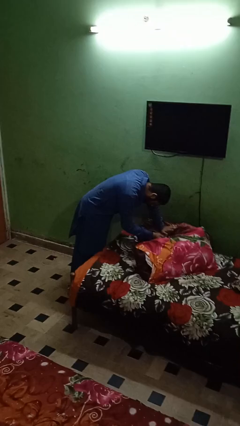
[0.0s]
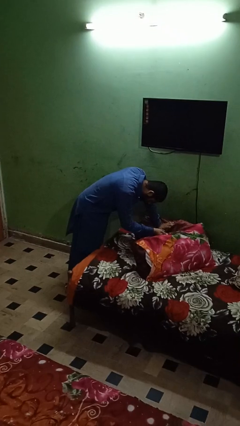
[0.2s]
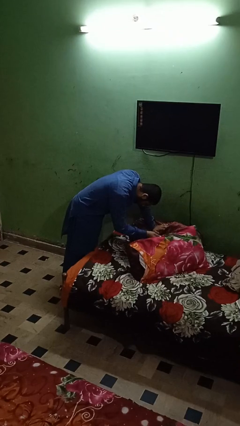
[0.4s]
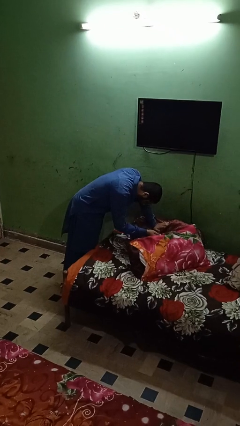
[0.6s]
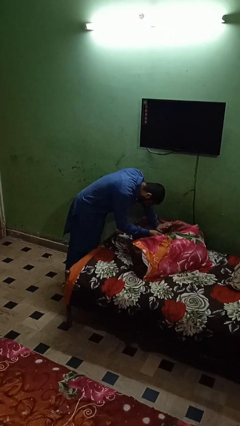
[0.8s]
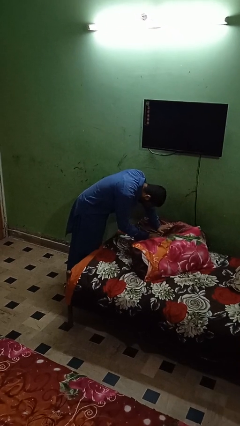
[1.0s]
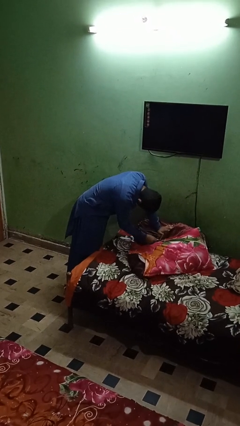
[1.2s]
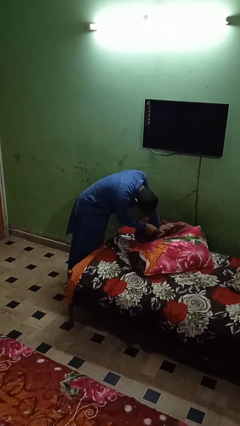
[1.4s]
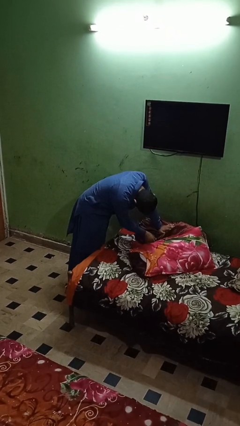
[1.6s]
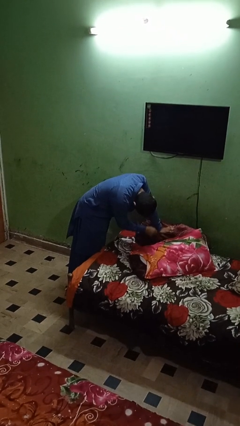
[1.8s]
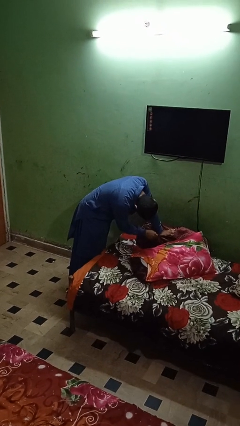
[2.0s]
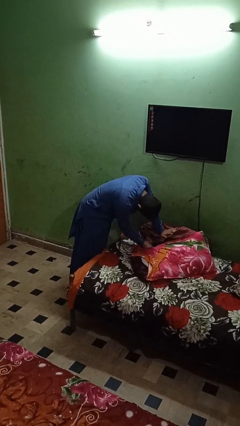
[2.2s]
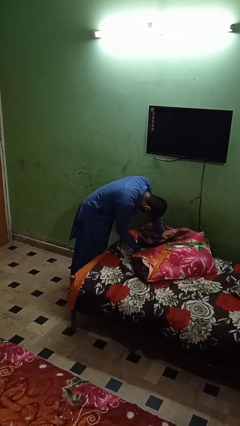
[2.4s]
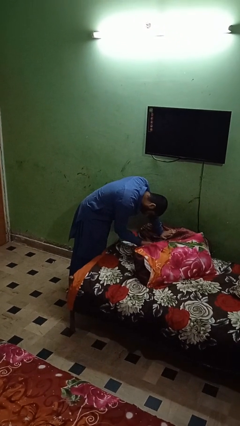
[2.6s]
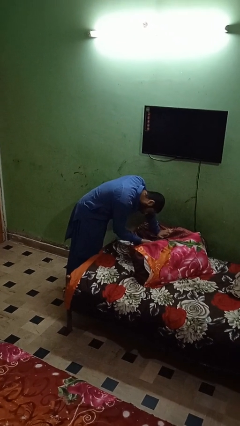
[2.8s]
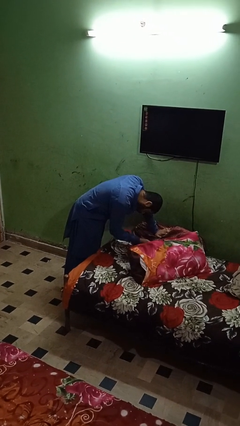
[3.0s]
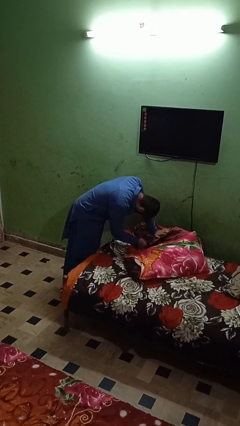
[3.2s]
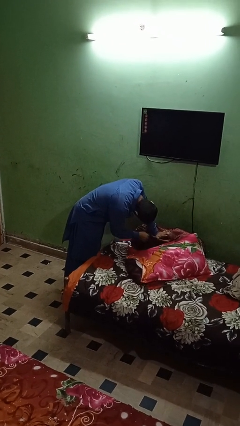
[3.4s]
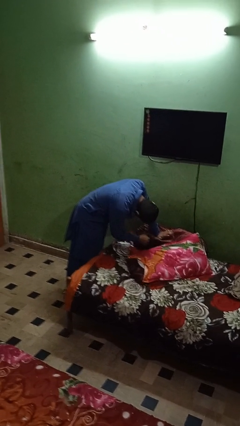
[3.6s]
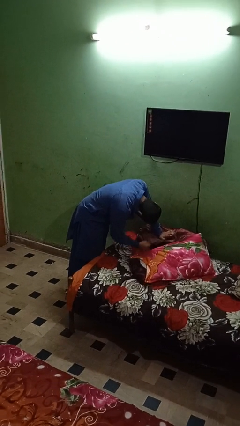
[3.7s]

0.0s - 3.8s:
person searches in couch

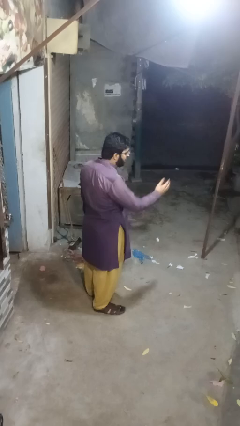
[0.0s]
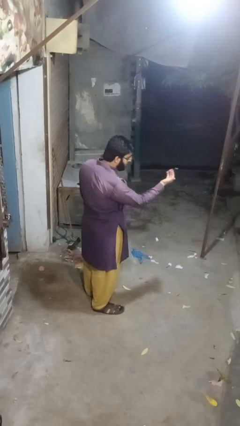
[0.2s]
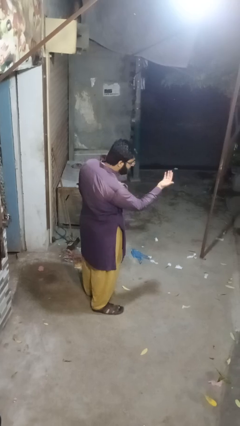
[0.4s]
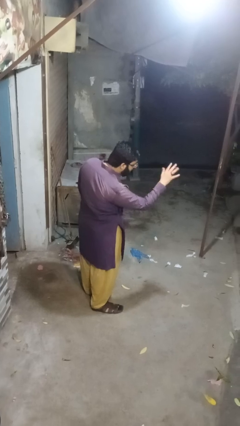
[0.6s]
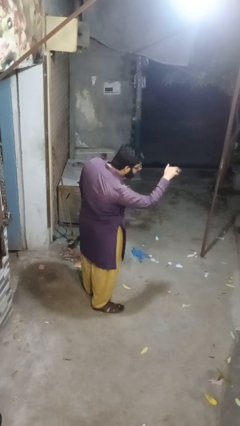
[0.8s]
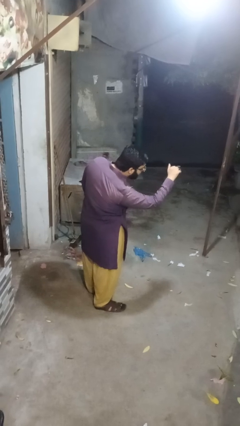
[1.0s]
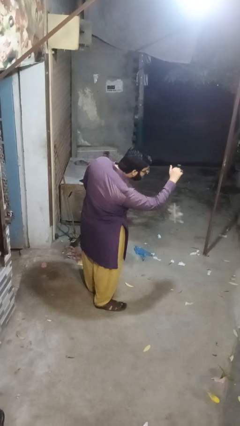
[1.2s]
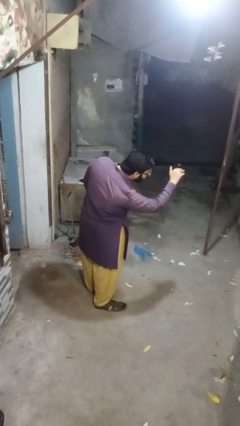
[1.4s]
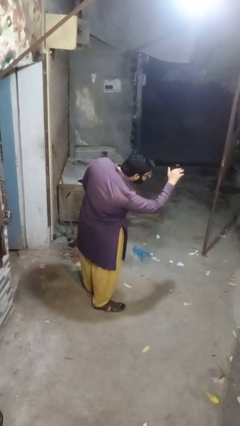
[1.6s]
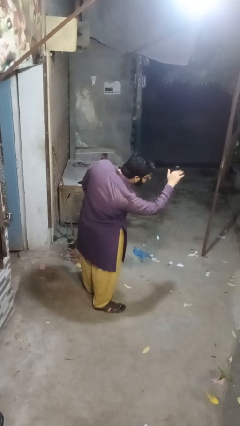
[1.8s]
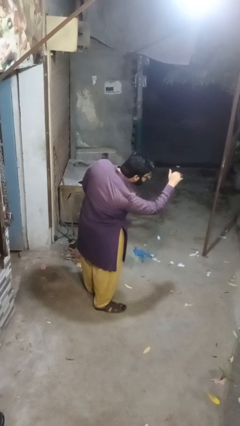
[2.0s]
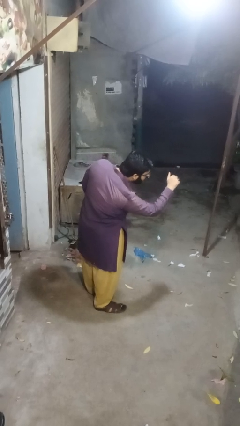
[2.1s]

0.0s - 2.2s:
person gestures lower hand

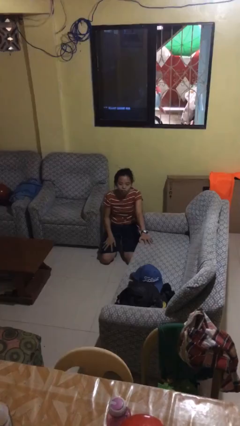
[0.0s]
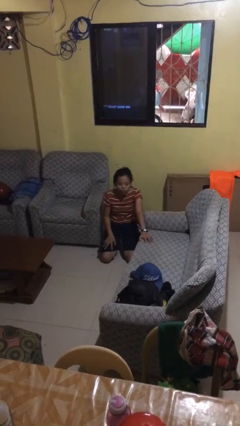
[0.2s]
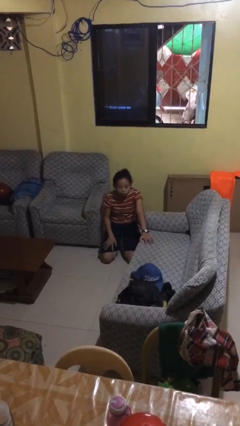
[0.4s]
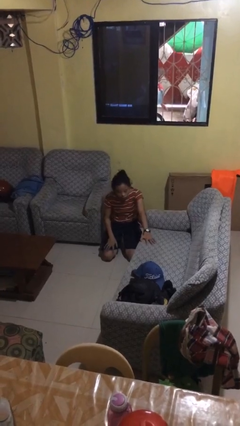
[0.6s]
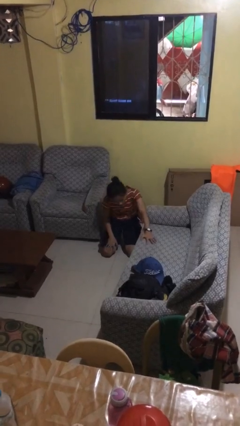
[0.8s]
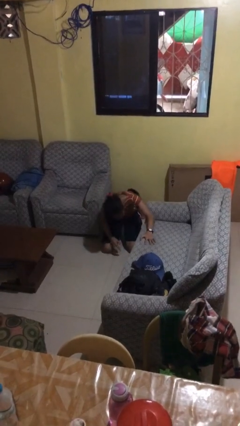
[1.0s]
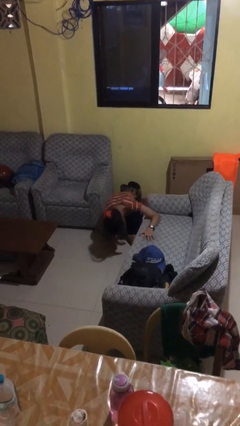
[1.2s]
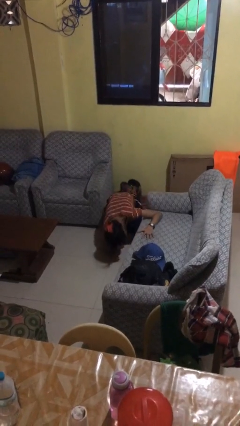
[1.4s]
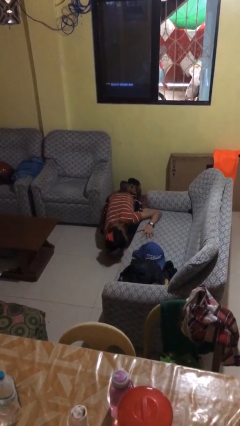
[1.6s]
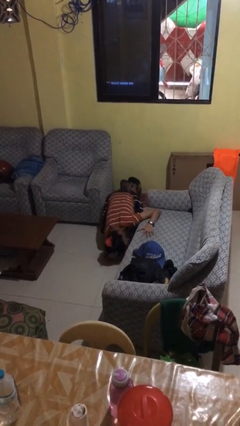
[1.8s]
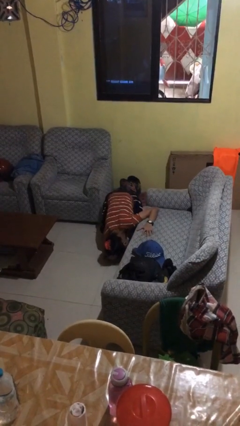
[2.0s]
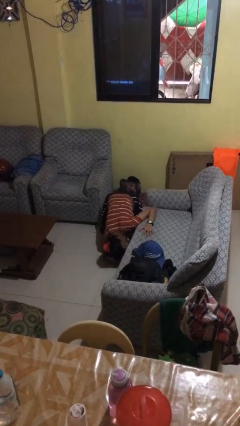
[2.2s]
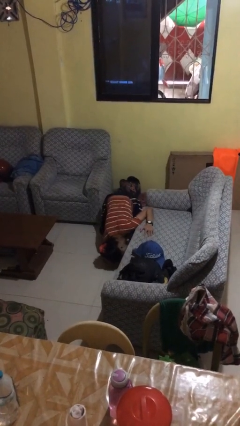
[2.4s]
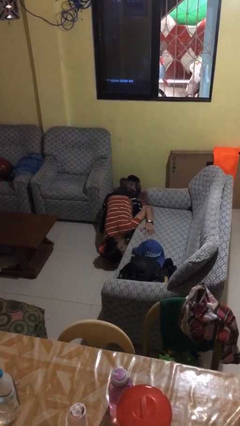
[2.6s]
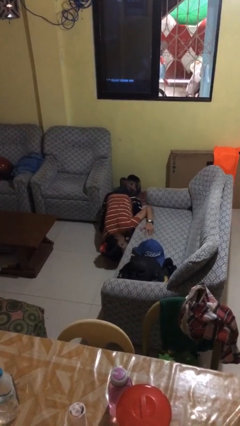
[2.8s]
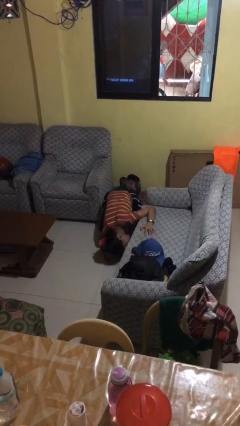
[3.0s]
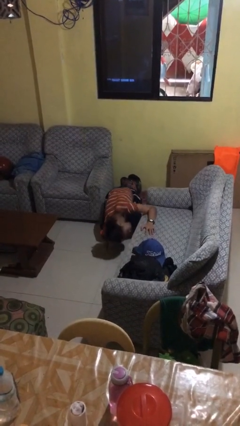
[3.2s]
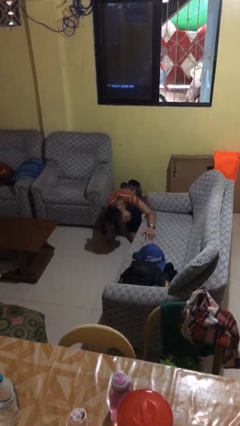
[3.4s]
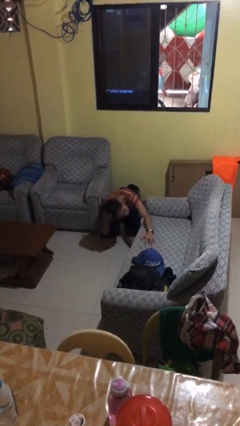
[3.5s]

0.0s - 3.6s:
person searches under couch

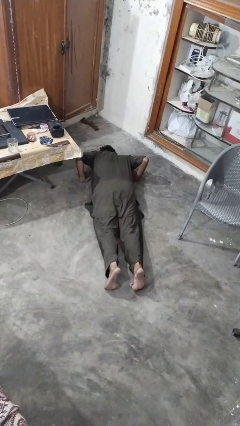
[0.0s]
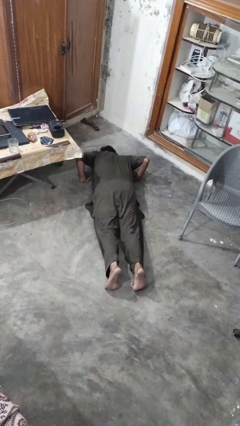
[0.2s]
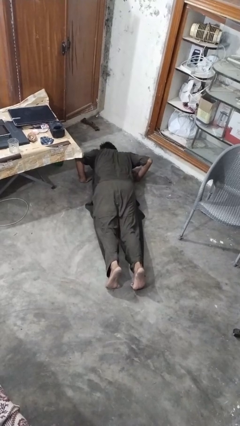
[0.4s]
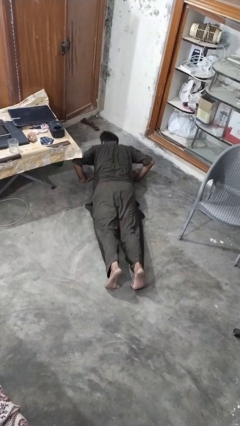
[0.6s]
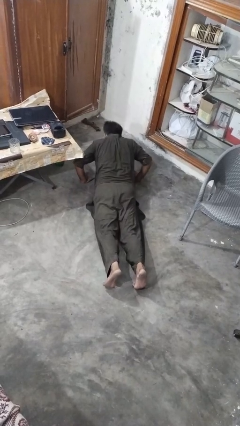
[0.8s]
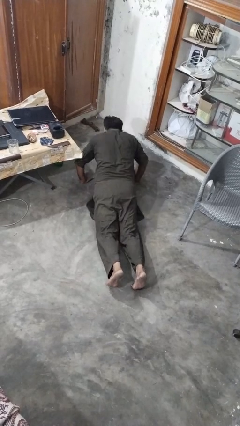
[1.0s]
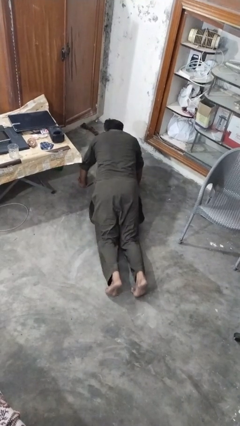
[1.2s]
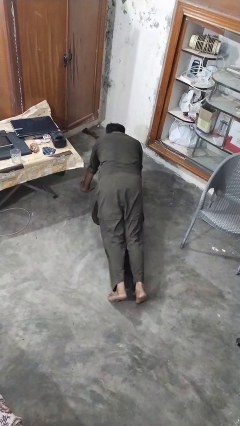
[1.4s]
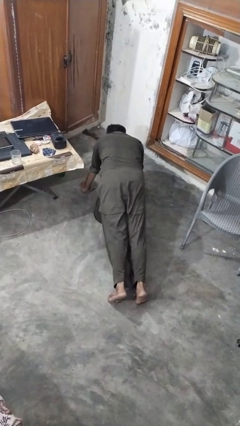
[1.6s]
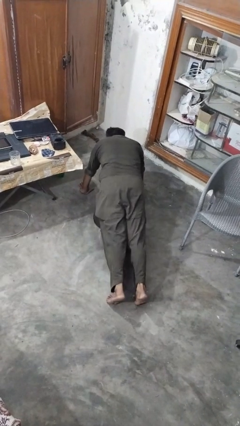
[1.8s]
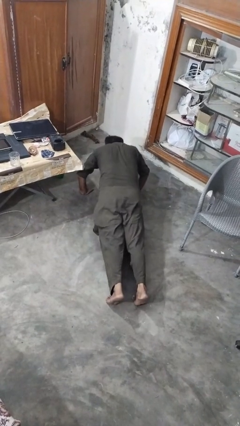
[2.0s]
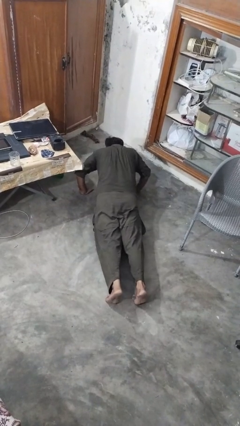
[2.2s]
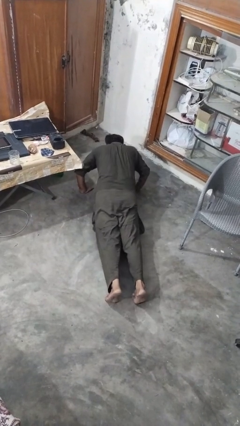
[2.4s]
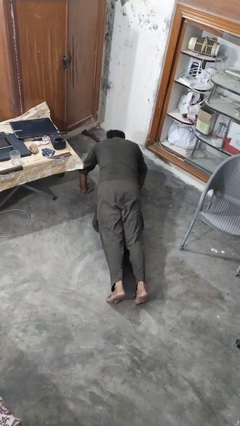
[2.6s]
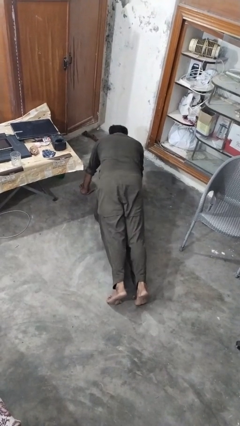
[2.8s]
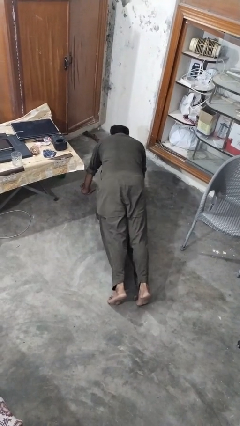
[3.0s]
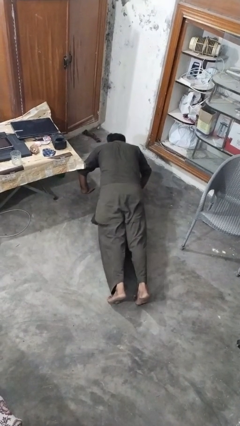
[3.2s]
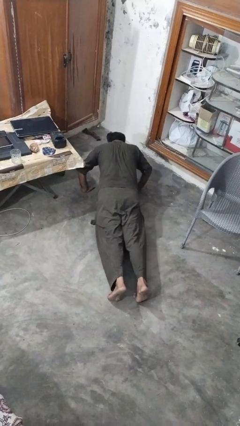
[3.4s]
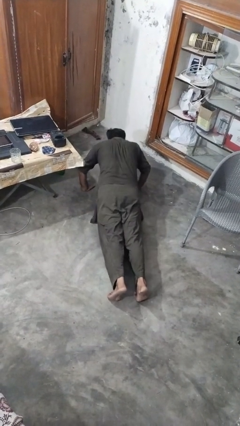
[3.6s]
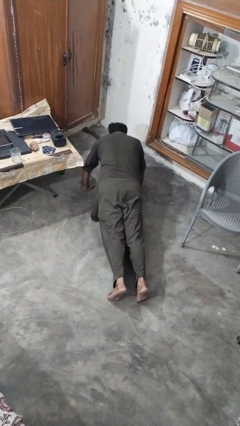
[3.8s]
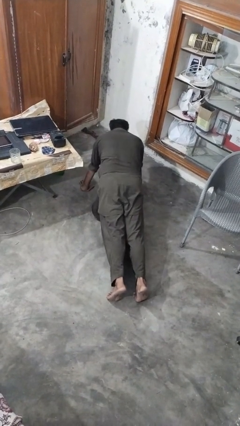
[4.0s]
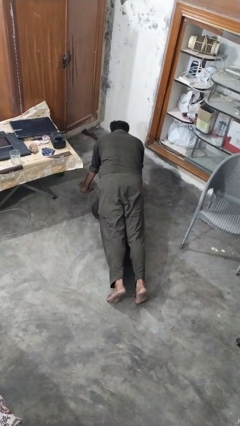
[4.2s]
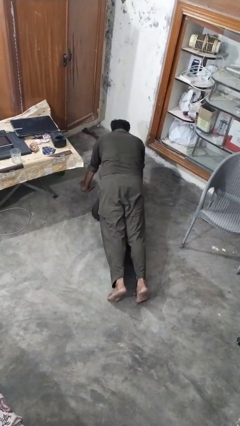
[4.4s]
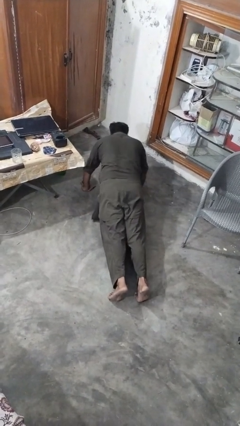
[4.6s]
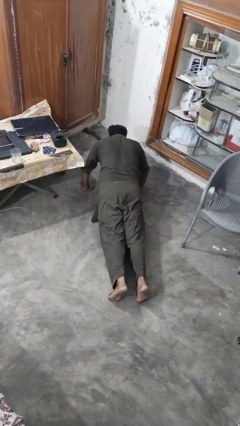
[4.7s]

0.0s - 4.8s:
person exercises with pushup

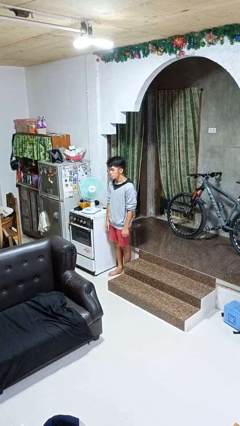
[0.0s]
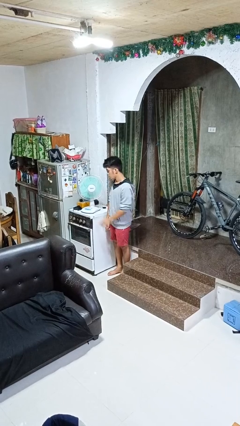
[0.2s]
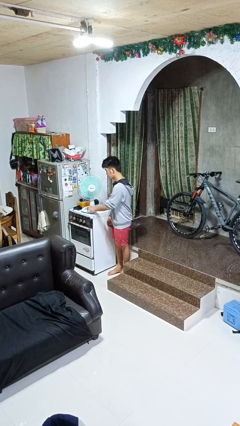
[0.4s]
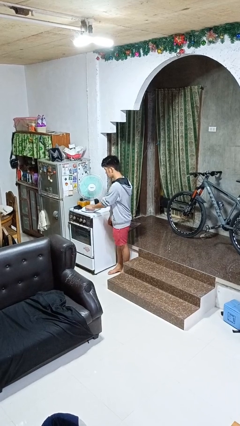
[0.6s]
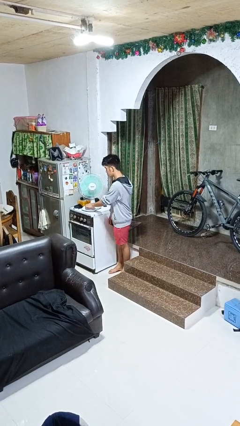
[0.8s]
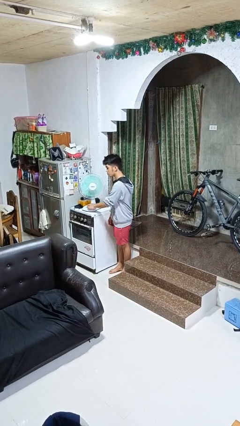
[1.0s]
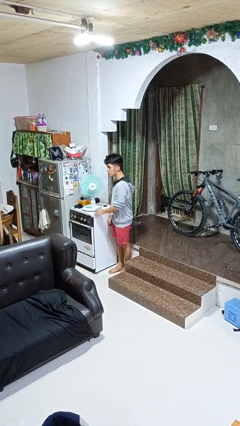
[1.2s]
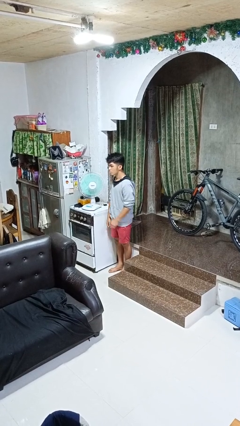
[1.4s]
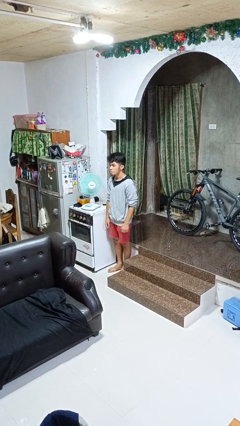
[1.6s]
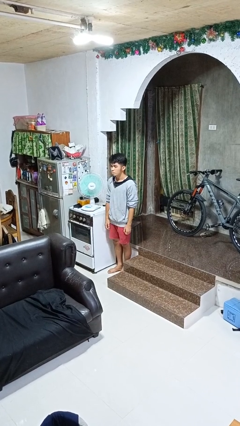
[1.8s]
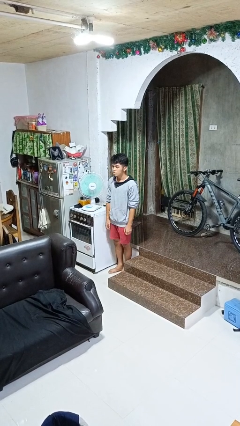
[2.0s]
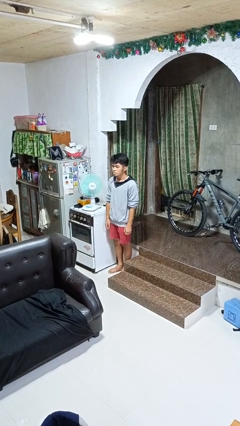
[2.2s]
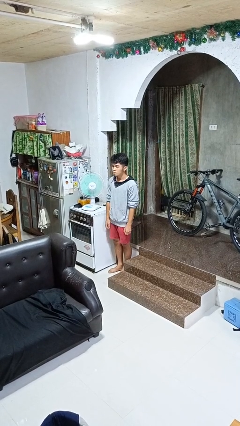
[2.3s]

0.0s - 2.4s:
person turns off fan

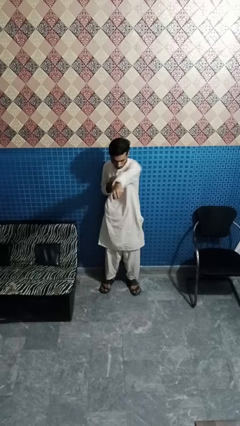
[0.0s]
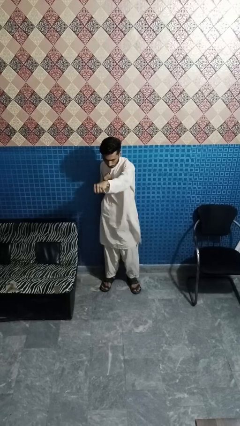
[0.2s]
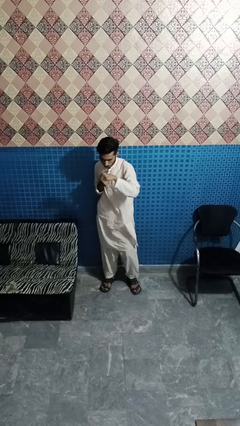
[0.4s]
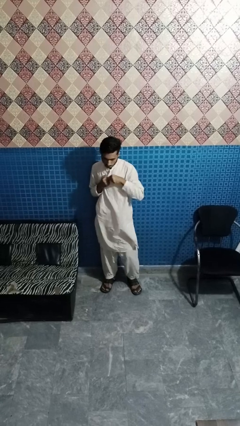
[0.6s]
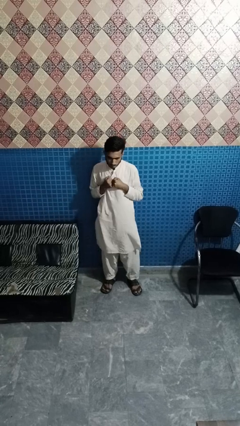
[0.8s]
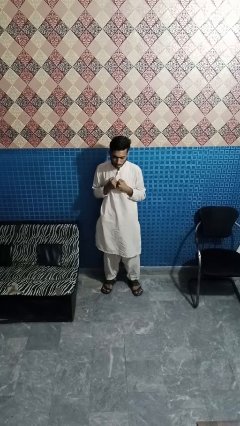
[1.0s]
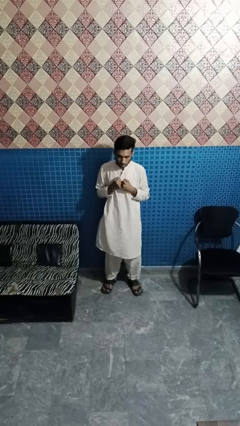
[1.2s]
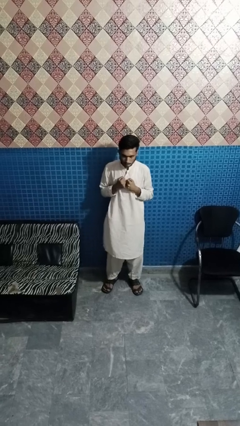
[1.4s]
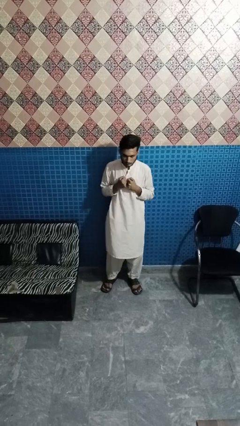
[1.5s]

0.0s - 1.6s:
person punches
